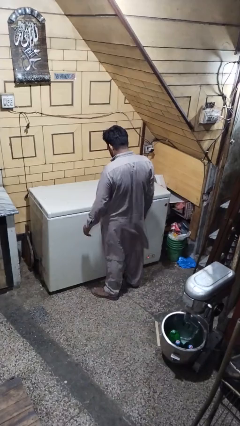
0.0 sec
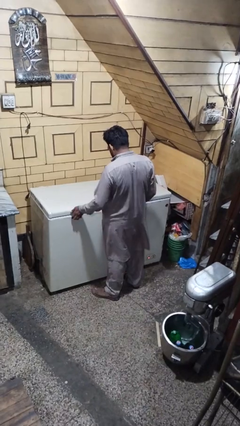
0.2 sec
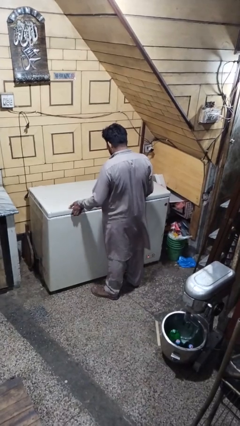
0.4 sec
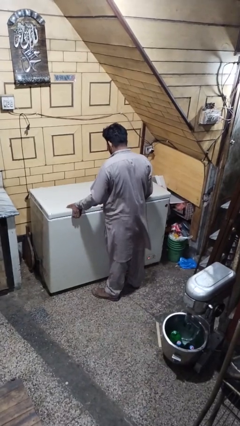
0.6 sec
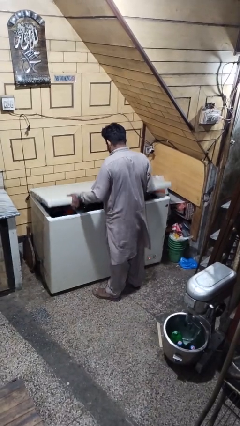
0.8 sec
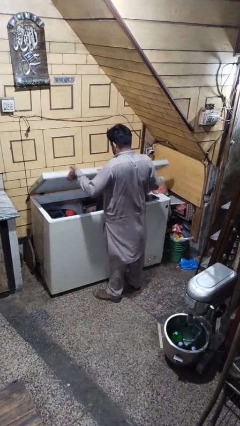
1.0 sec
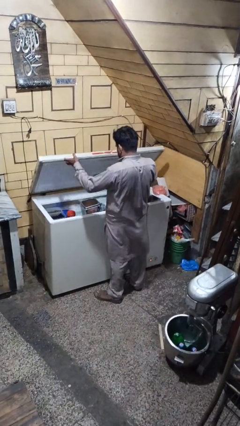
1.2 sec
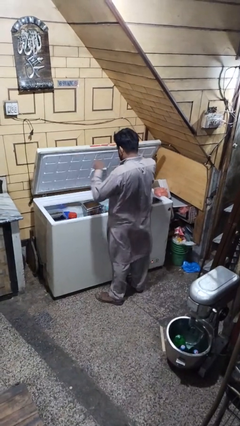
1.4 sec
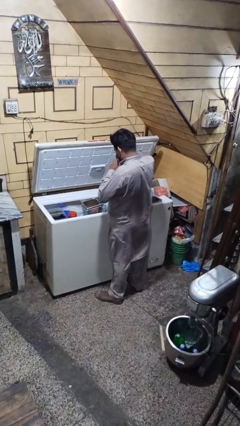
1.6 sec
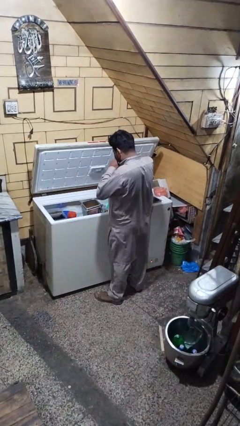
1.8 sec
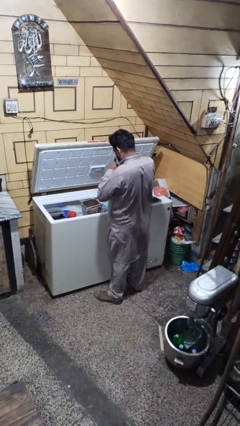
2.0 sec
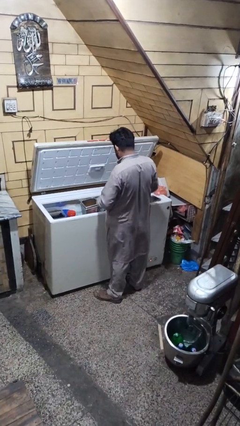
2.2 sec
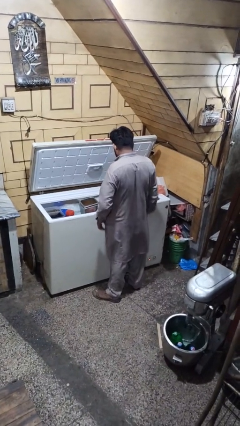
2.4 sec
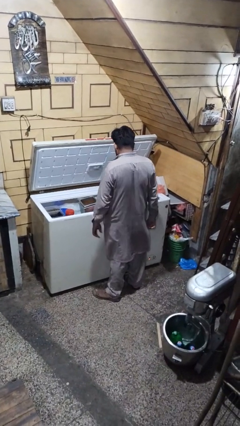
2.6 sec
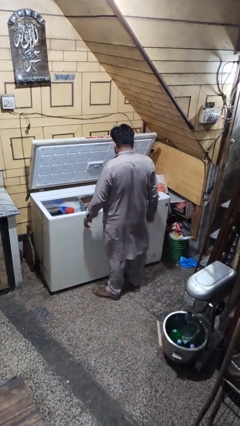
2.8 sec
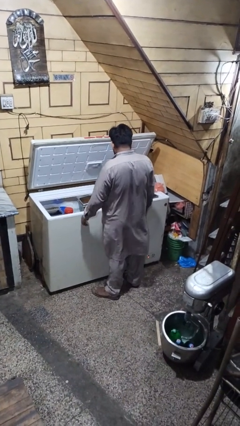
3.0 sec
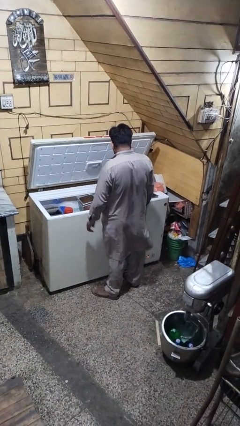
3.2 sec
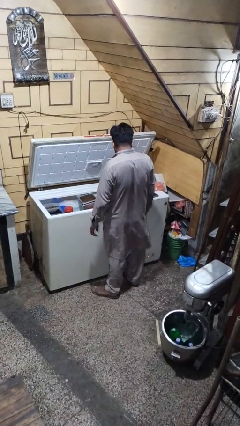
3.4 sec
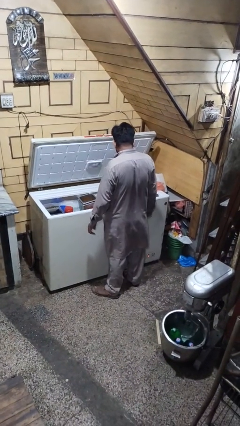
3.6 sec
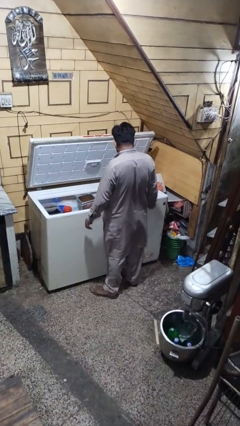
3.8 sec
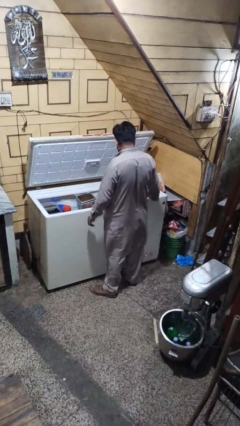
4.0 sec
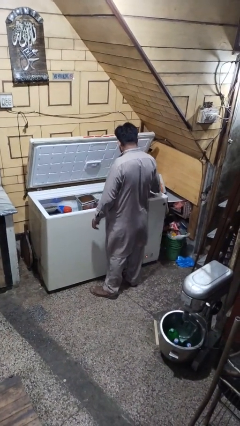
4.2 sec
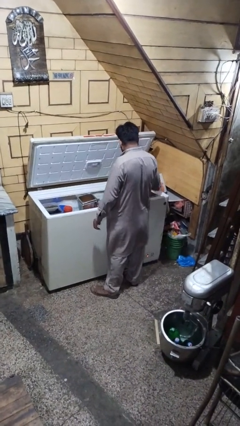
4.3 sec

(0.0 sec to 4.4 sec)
person opens refrigerator

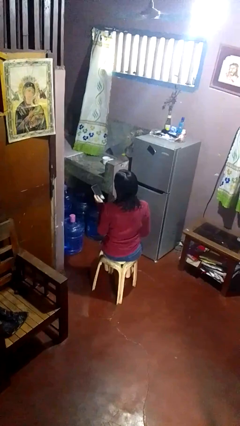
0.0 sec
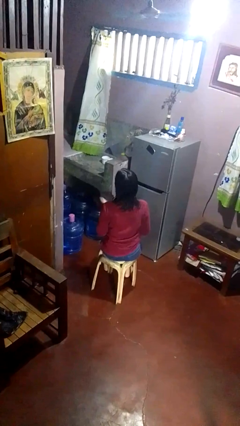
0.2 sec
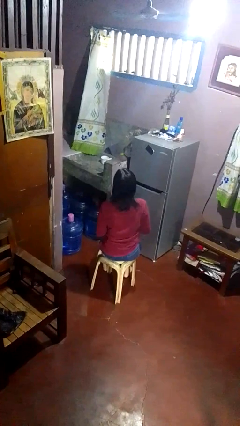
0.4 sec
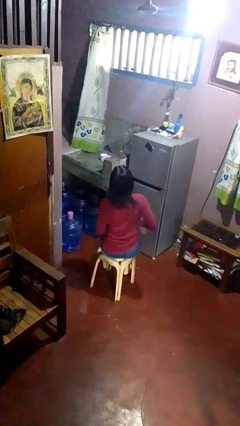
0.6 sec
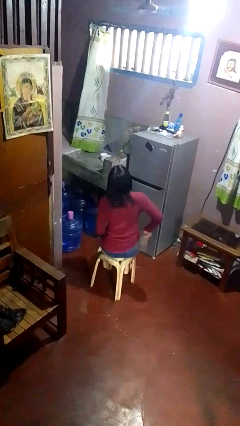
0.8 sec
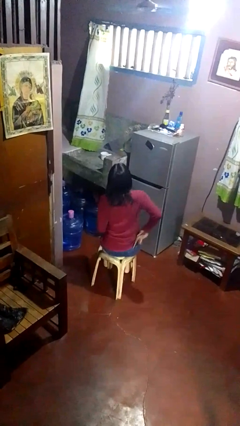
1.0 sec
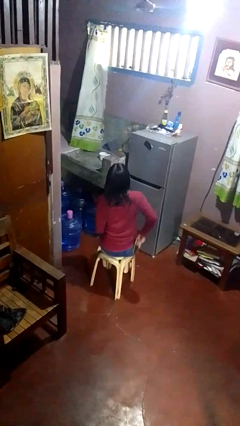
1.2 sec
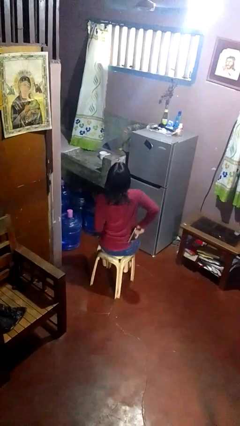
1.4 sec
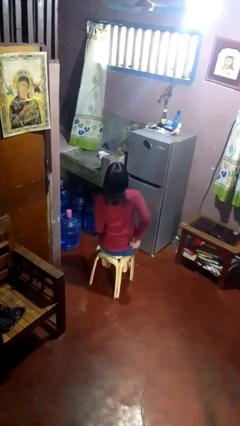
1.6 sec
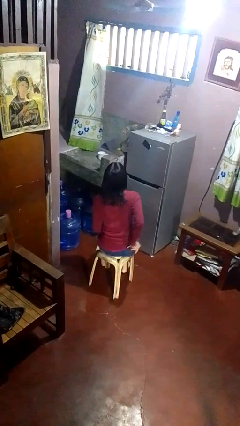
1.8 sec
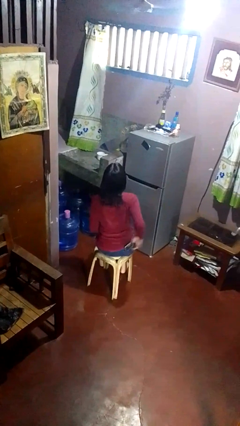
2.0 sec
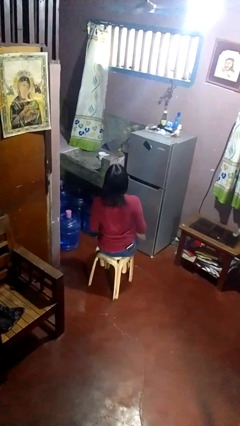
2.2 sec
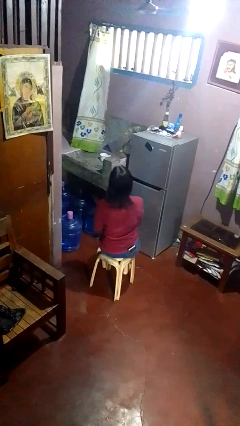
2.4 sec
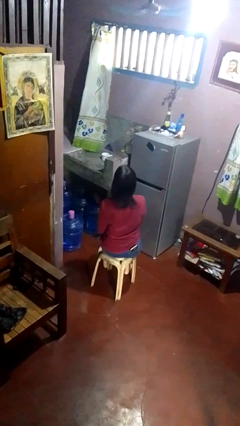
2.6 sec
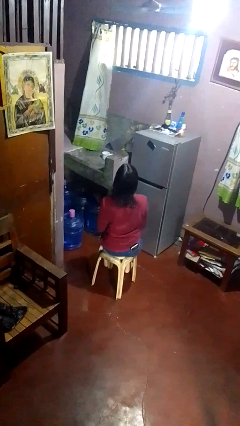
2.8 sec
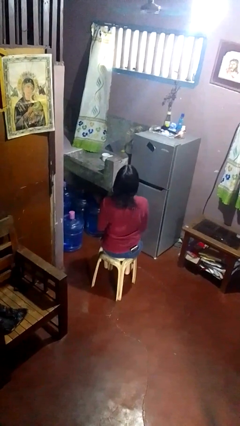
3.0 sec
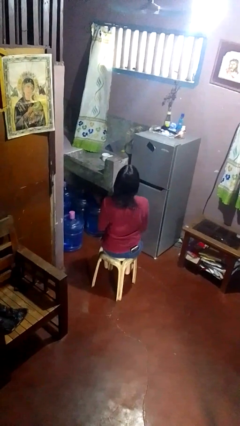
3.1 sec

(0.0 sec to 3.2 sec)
person puts phone into pocket

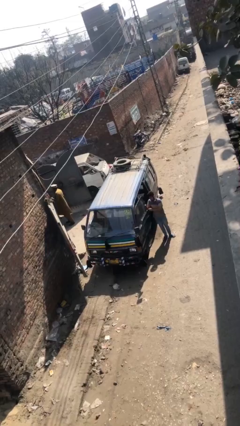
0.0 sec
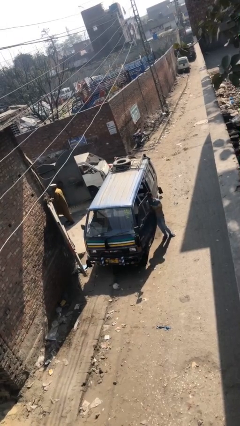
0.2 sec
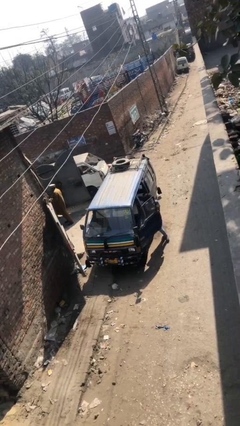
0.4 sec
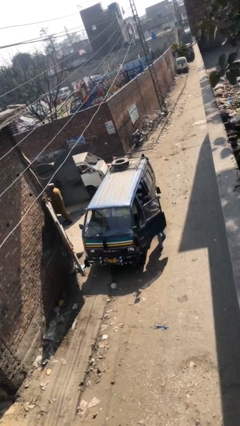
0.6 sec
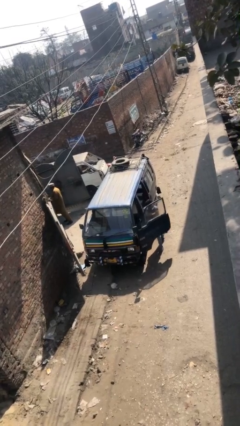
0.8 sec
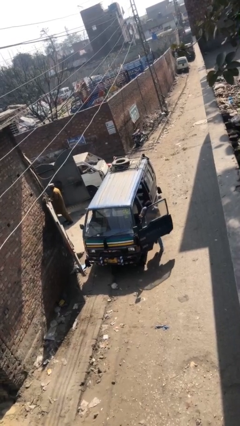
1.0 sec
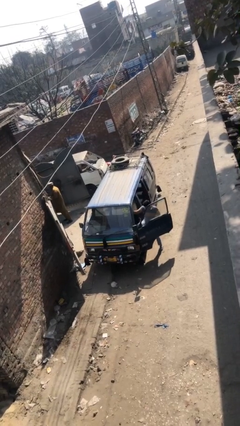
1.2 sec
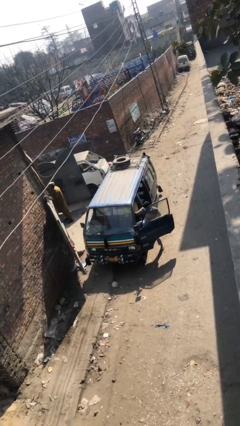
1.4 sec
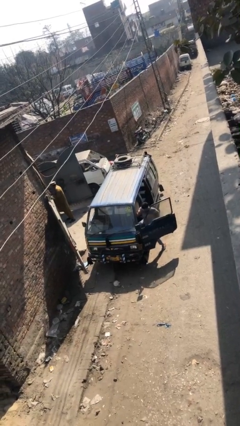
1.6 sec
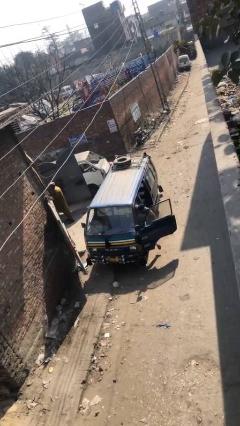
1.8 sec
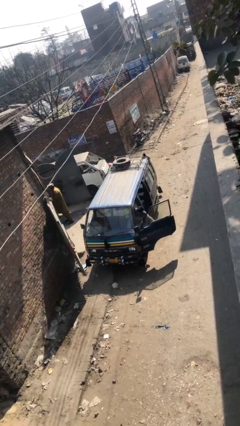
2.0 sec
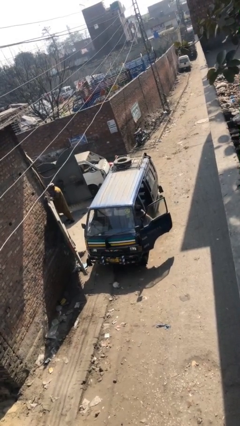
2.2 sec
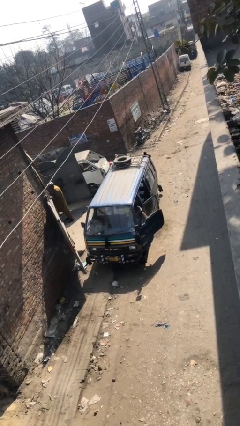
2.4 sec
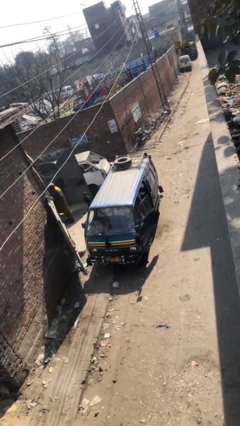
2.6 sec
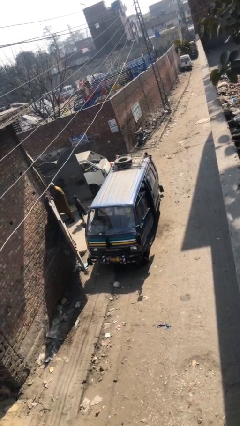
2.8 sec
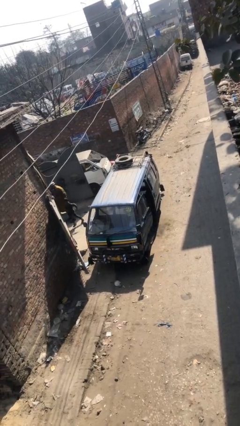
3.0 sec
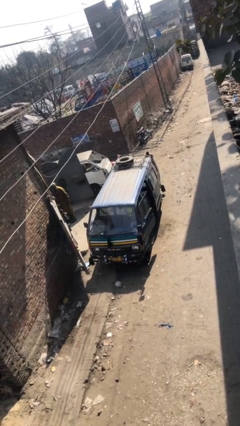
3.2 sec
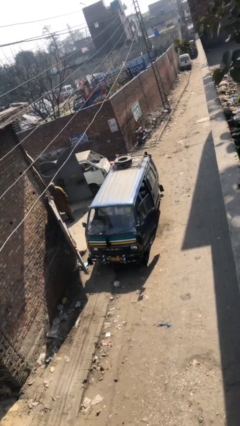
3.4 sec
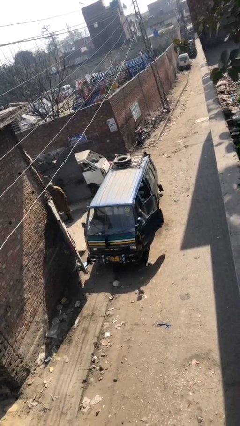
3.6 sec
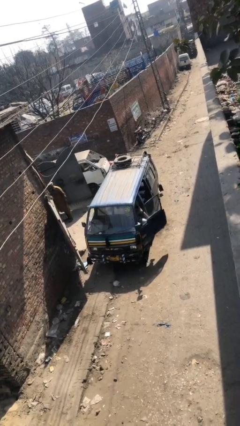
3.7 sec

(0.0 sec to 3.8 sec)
car picks up person

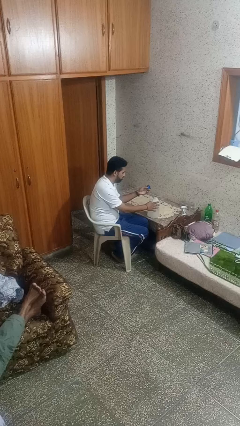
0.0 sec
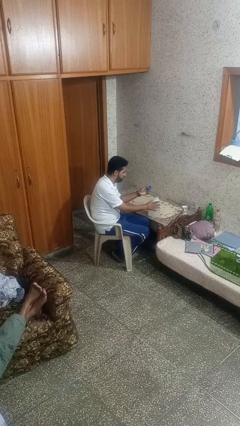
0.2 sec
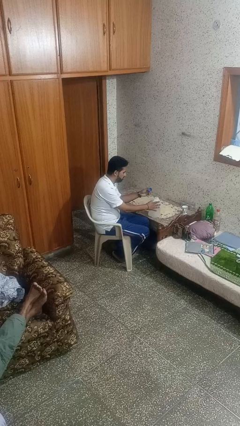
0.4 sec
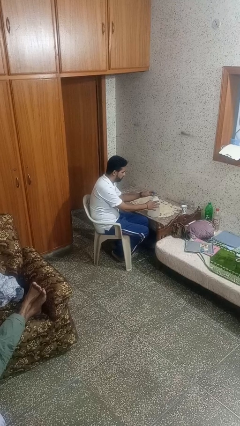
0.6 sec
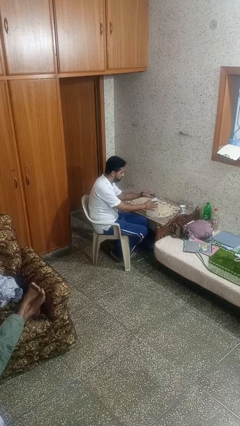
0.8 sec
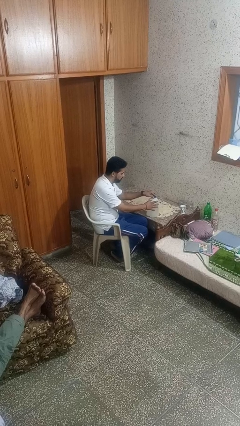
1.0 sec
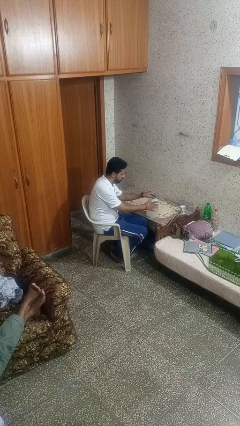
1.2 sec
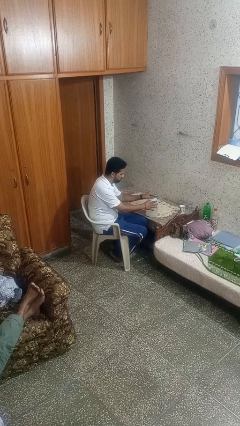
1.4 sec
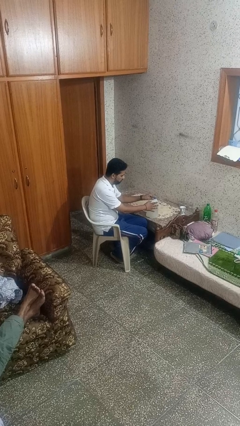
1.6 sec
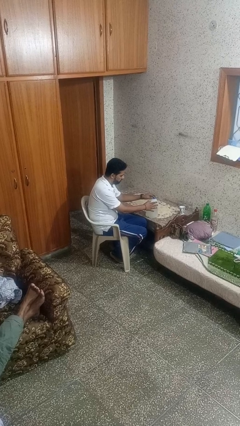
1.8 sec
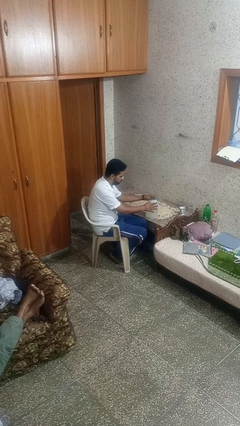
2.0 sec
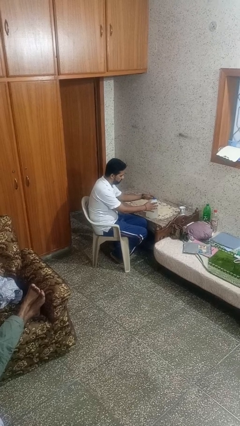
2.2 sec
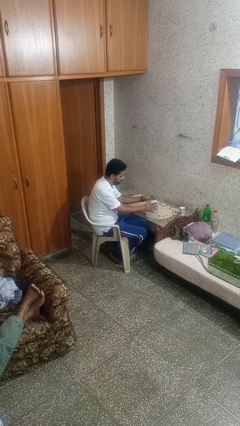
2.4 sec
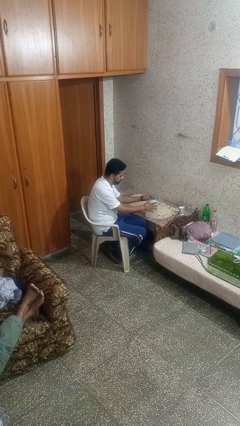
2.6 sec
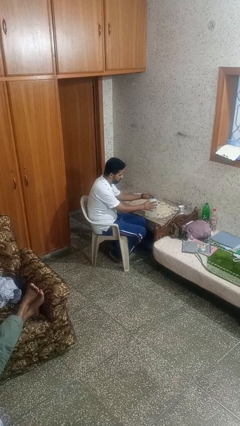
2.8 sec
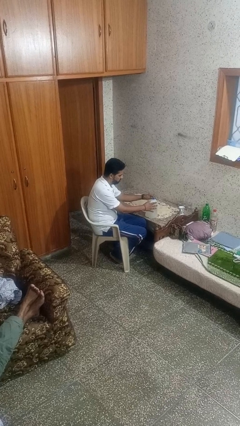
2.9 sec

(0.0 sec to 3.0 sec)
person screws lid to bottle

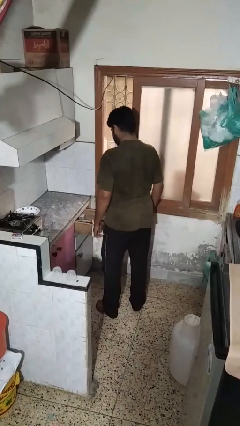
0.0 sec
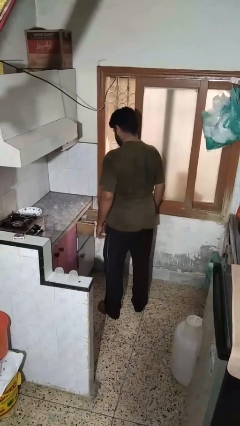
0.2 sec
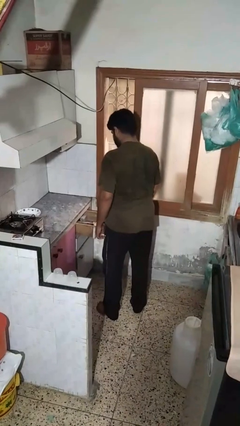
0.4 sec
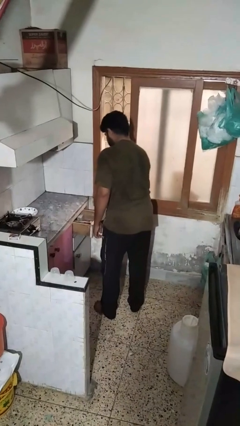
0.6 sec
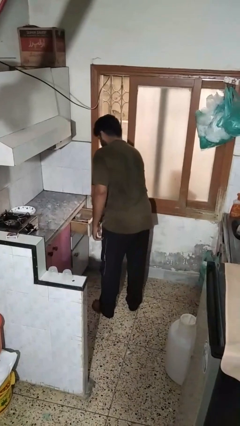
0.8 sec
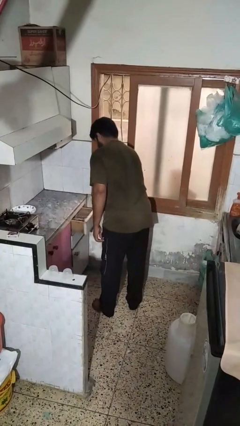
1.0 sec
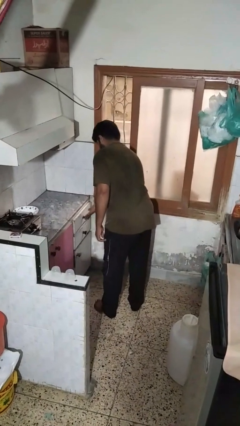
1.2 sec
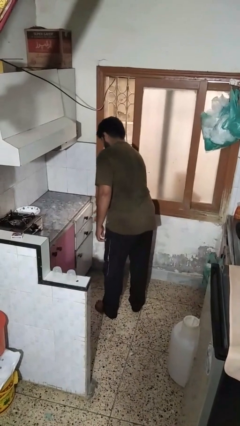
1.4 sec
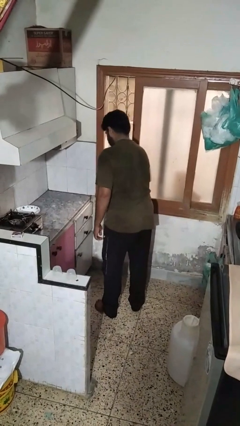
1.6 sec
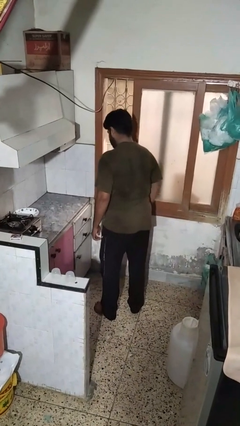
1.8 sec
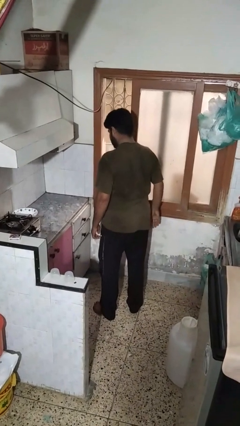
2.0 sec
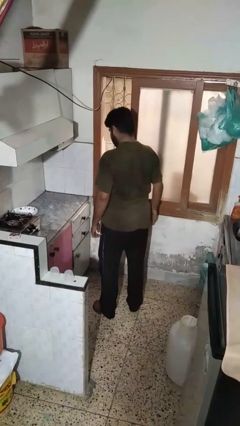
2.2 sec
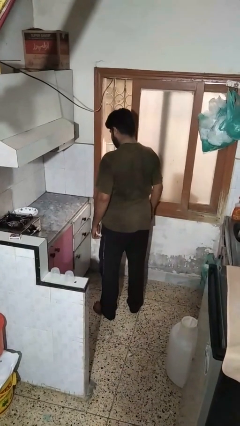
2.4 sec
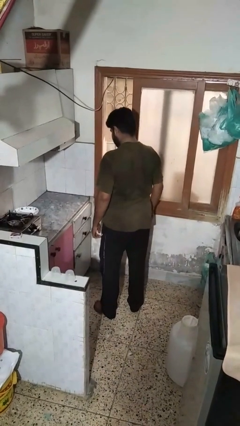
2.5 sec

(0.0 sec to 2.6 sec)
person closes kitchen drawer

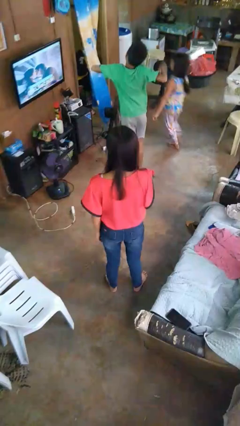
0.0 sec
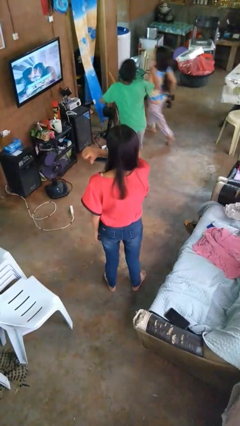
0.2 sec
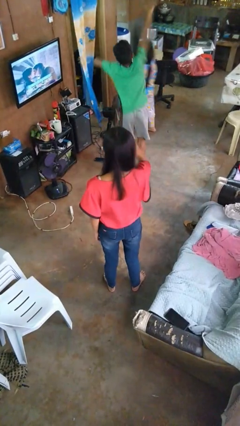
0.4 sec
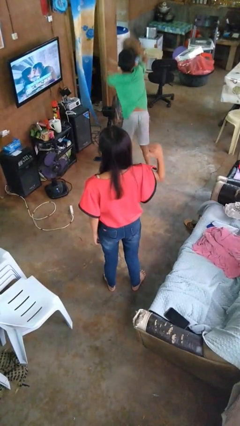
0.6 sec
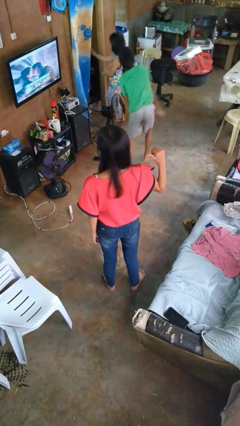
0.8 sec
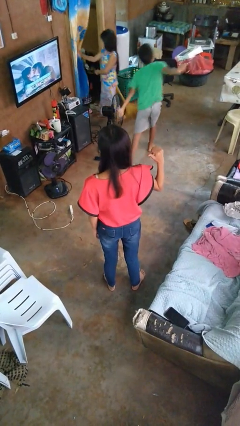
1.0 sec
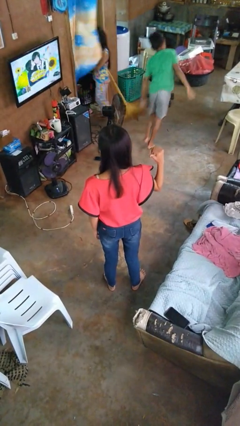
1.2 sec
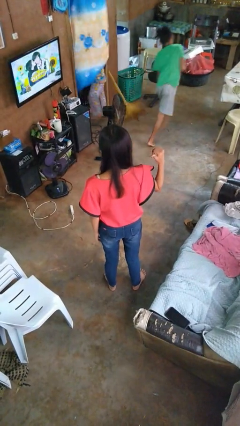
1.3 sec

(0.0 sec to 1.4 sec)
person gestures cut
